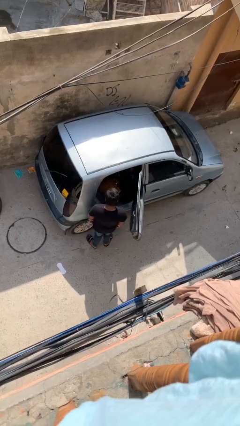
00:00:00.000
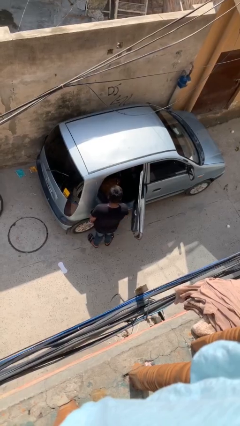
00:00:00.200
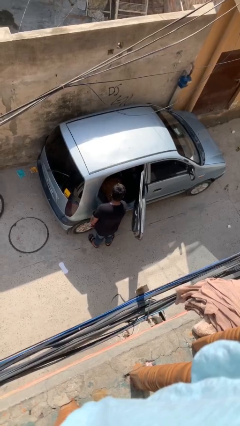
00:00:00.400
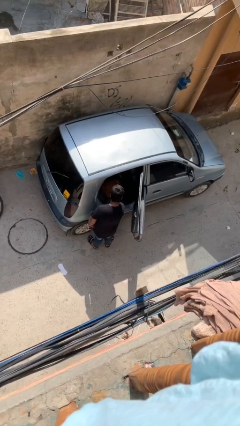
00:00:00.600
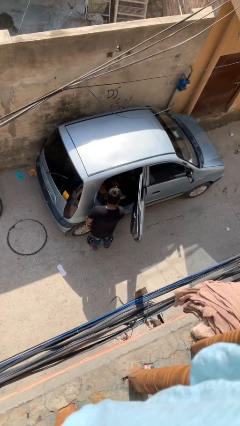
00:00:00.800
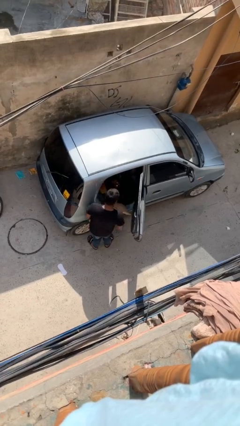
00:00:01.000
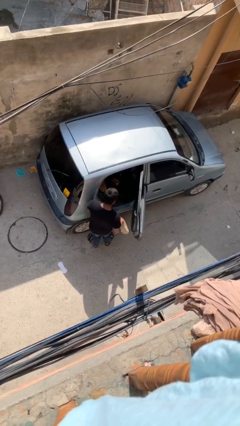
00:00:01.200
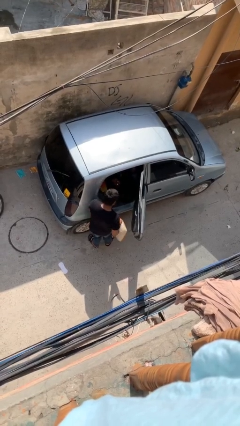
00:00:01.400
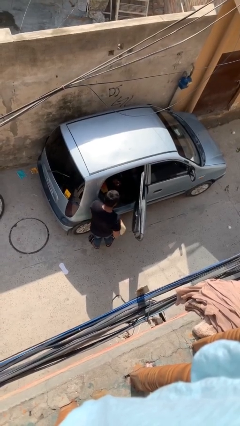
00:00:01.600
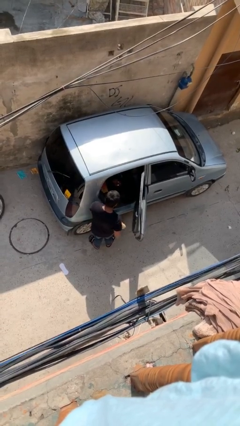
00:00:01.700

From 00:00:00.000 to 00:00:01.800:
person unloads car

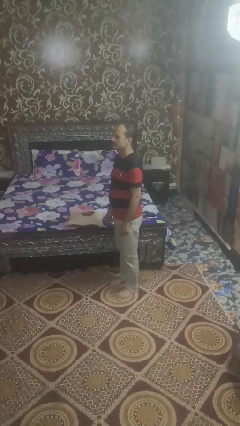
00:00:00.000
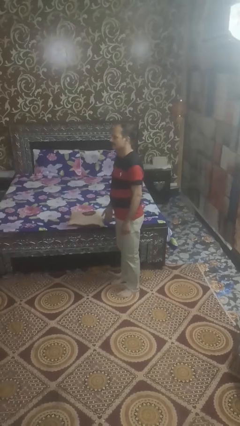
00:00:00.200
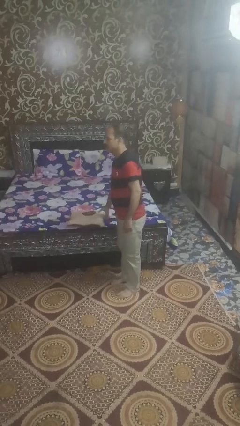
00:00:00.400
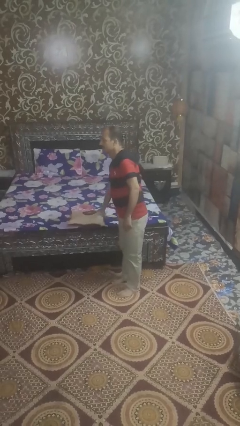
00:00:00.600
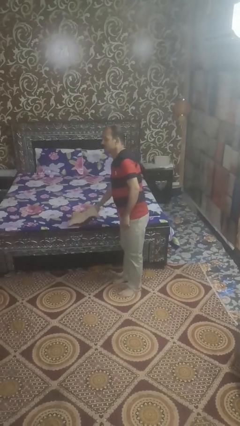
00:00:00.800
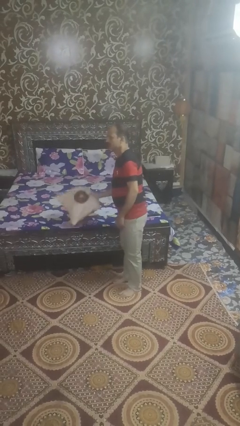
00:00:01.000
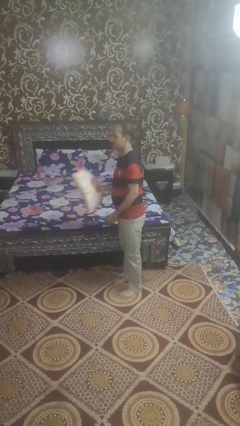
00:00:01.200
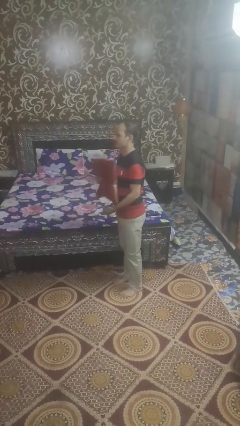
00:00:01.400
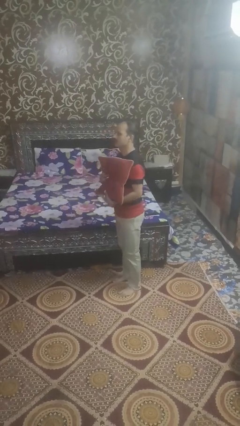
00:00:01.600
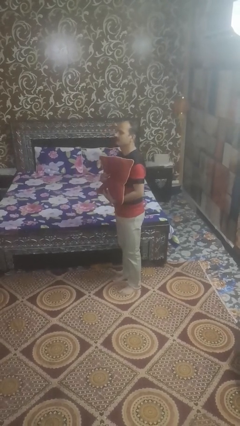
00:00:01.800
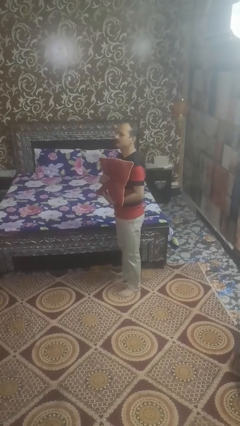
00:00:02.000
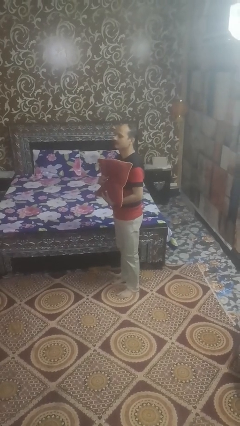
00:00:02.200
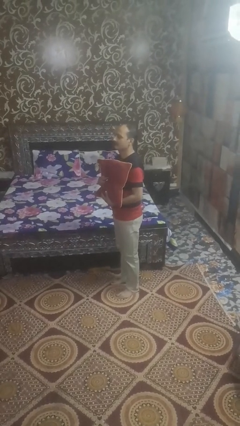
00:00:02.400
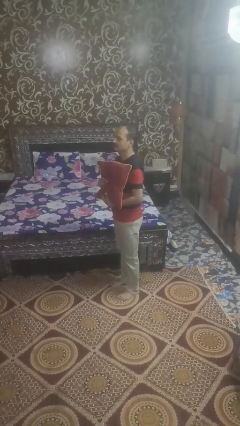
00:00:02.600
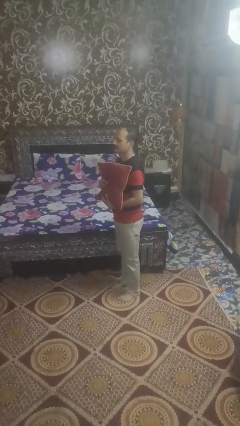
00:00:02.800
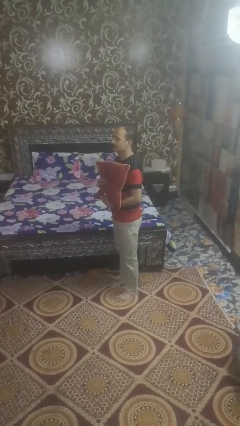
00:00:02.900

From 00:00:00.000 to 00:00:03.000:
person picks up object from bed

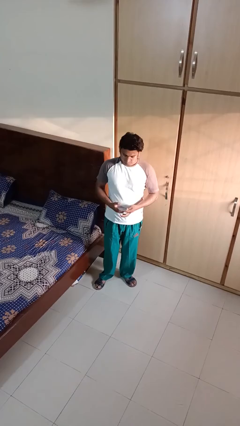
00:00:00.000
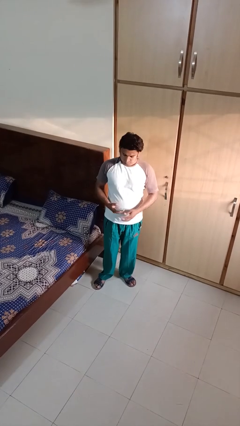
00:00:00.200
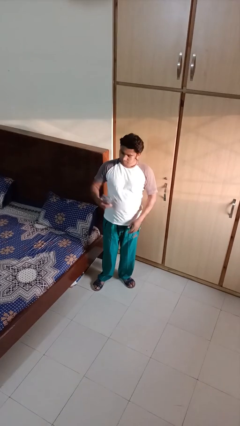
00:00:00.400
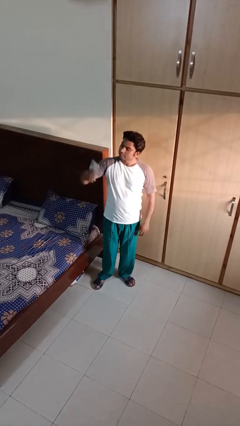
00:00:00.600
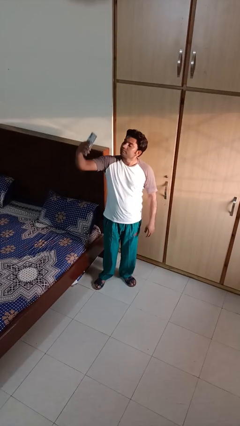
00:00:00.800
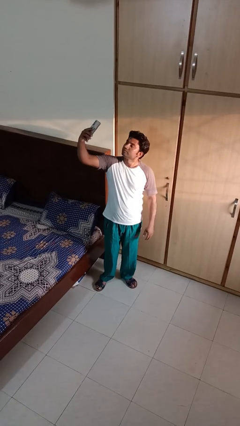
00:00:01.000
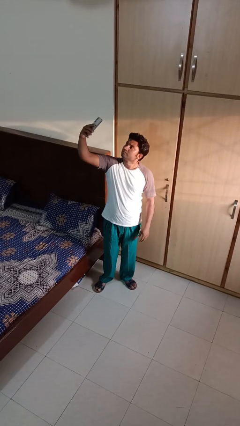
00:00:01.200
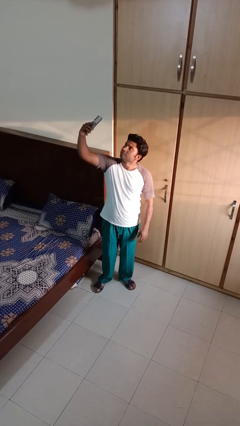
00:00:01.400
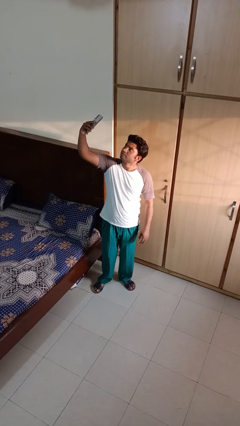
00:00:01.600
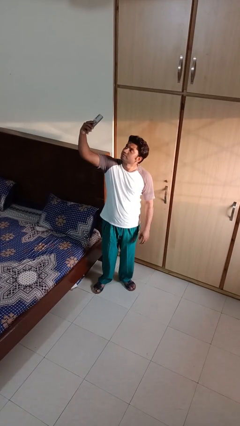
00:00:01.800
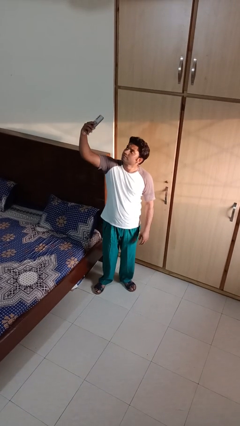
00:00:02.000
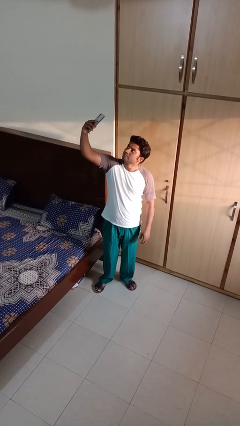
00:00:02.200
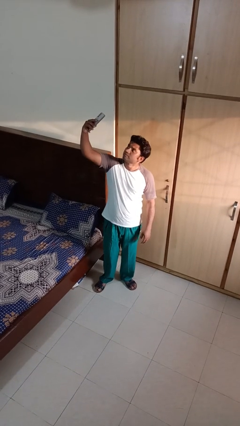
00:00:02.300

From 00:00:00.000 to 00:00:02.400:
person takes selfie

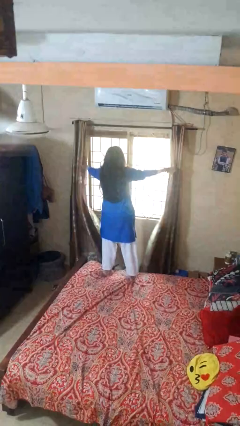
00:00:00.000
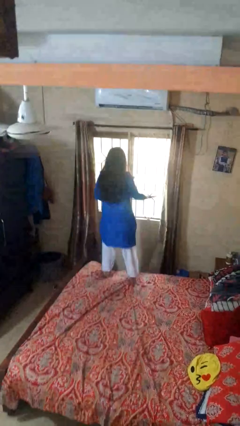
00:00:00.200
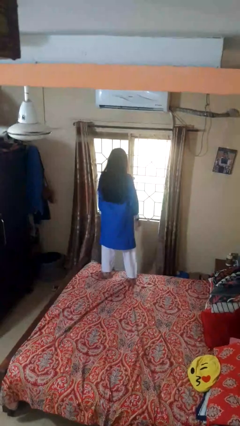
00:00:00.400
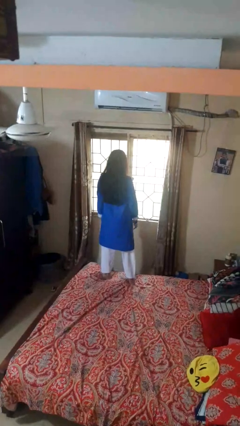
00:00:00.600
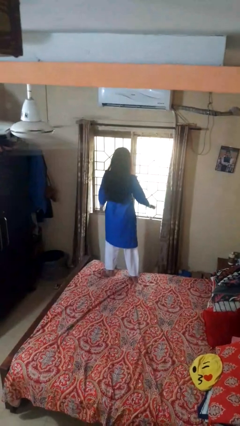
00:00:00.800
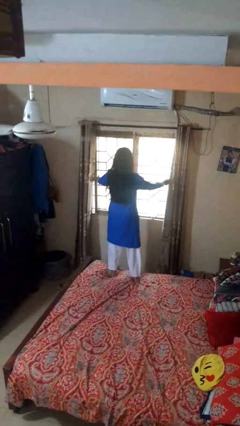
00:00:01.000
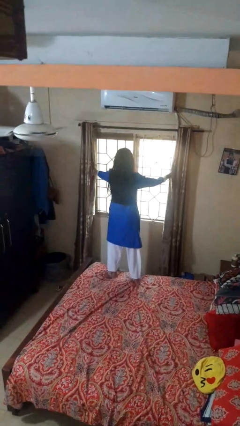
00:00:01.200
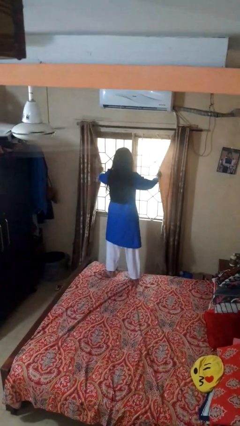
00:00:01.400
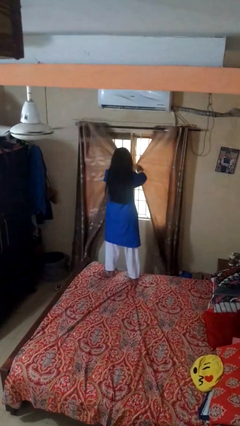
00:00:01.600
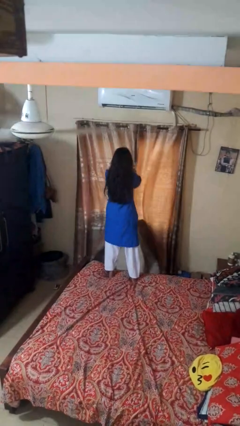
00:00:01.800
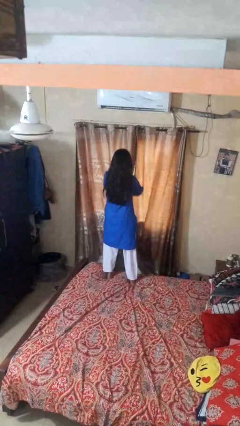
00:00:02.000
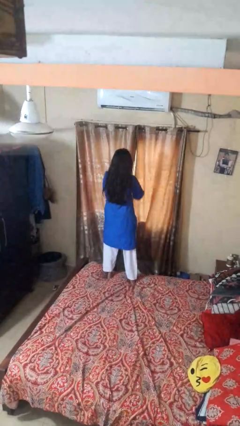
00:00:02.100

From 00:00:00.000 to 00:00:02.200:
person closes curtains

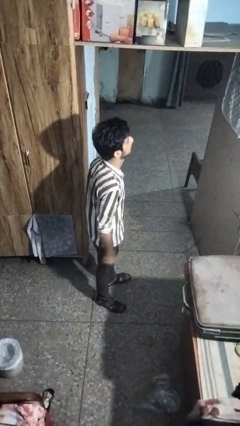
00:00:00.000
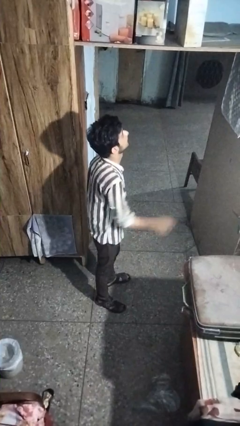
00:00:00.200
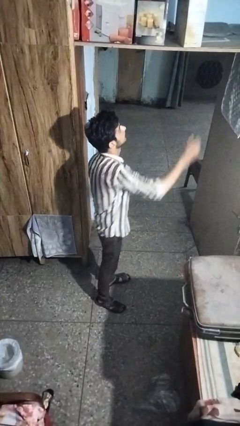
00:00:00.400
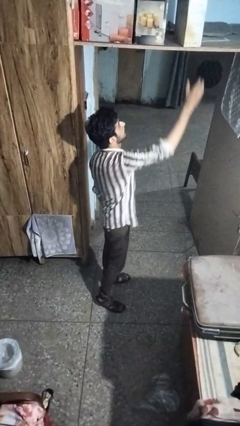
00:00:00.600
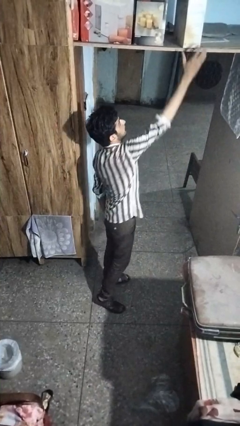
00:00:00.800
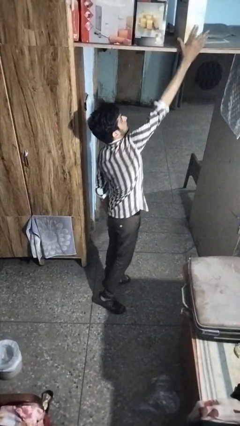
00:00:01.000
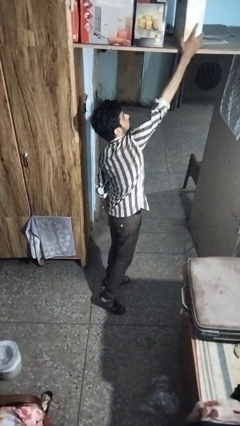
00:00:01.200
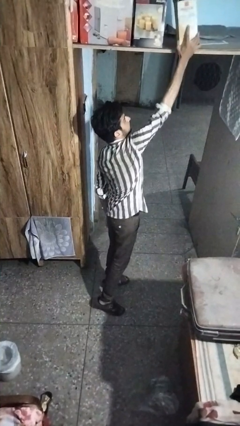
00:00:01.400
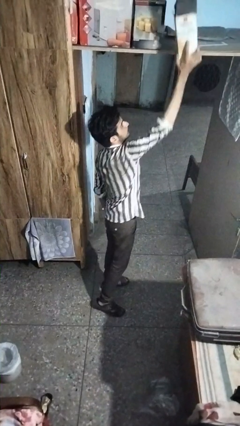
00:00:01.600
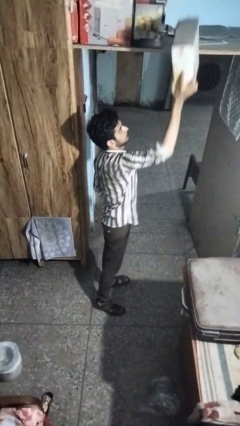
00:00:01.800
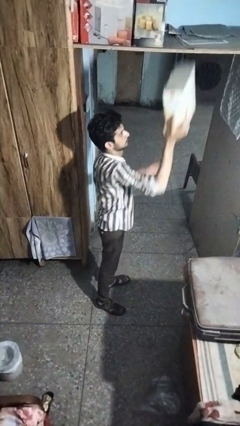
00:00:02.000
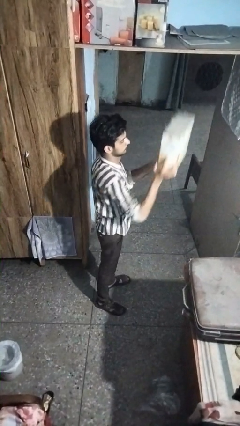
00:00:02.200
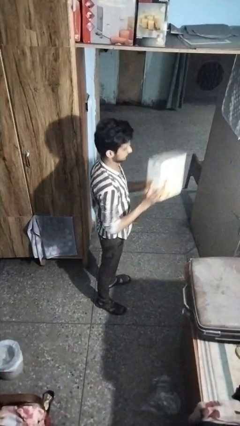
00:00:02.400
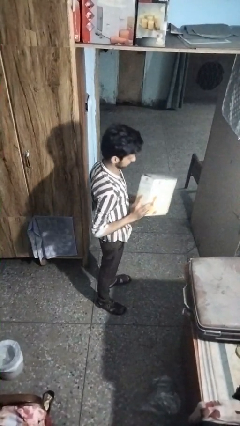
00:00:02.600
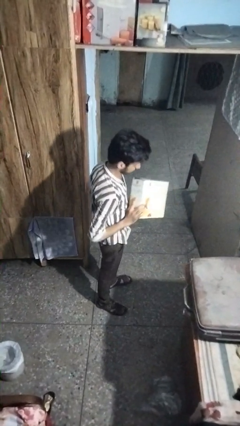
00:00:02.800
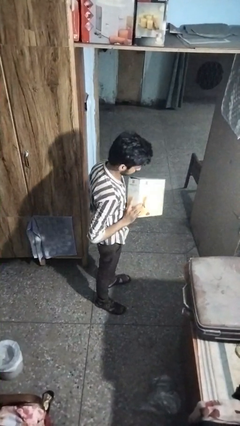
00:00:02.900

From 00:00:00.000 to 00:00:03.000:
person picks up object from shelf

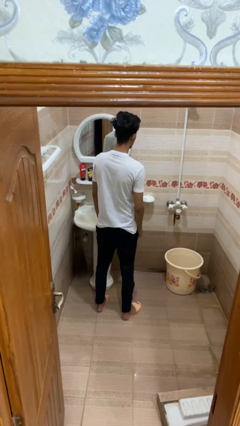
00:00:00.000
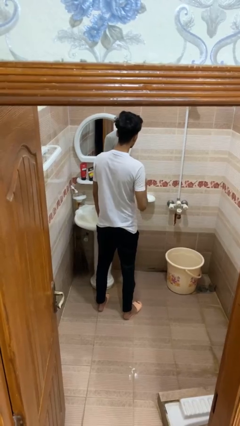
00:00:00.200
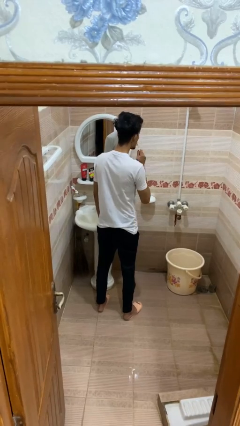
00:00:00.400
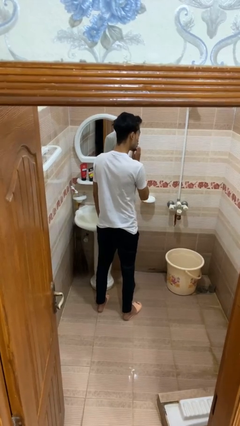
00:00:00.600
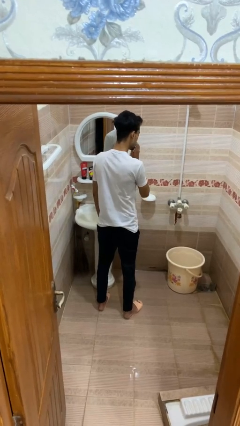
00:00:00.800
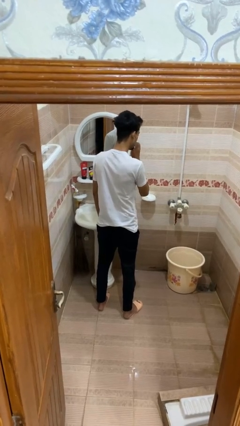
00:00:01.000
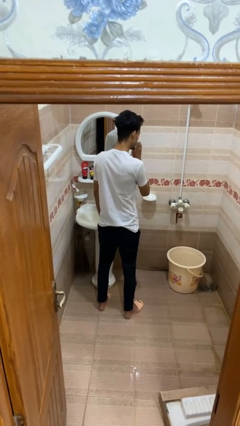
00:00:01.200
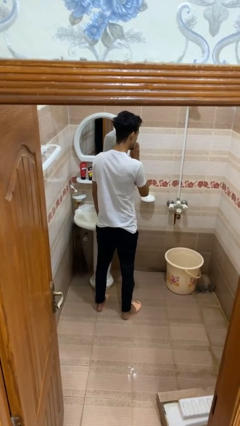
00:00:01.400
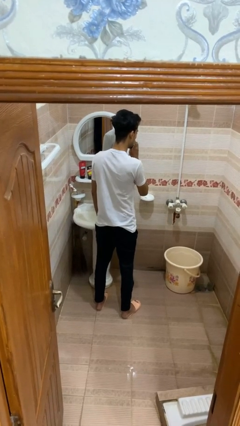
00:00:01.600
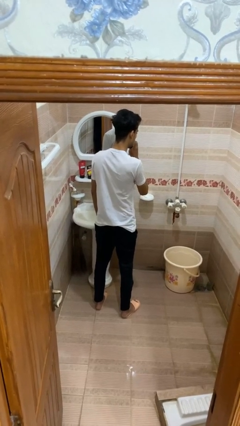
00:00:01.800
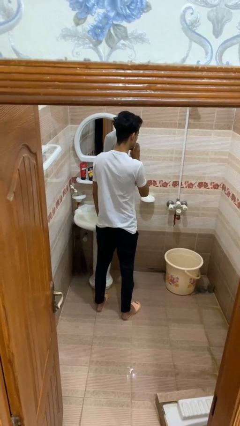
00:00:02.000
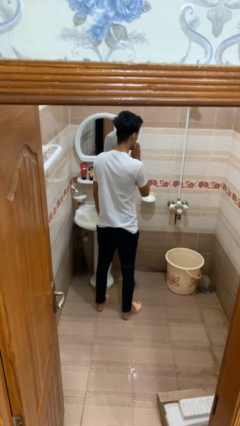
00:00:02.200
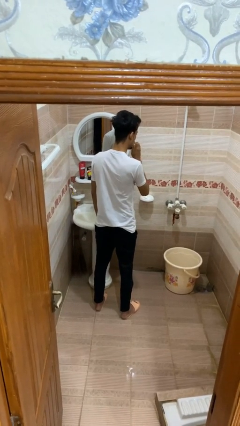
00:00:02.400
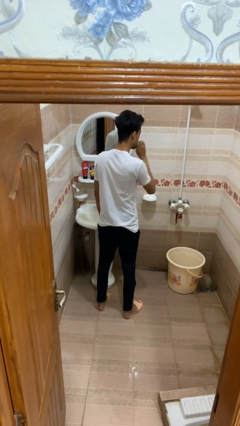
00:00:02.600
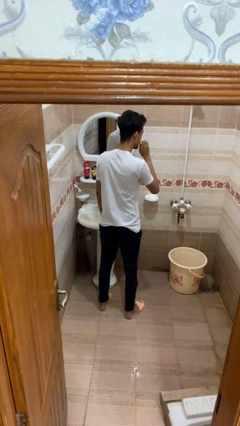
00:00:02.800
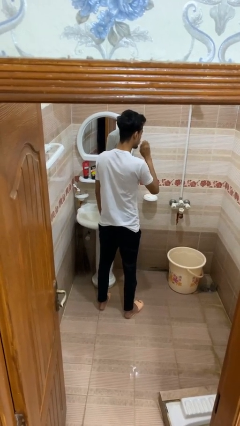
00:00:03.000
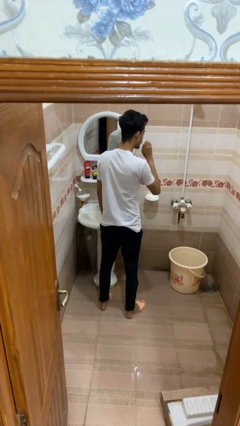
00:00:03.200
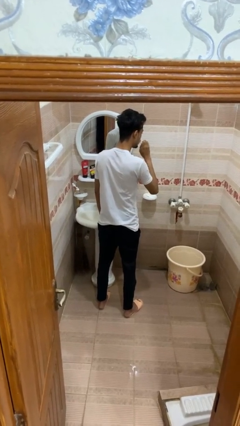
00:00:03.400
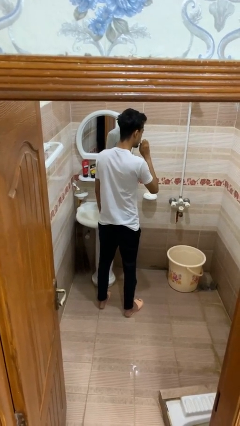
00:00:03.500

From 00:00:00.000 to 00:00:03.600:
person brushes teeth

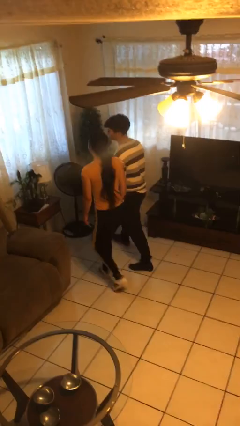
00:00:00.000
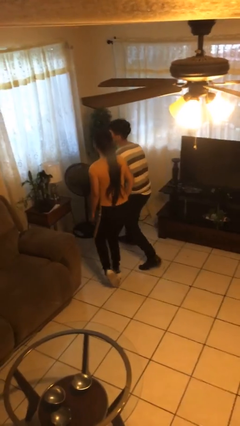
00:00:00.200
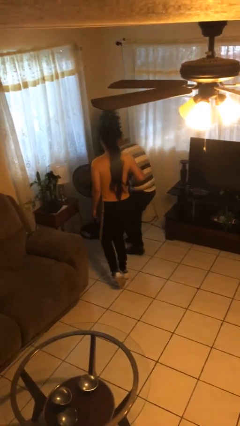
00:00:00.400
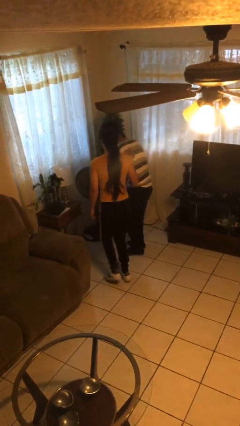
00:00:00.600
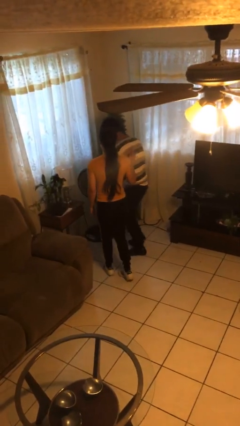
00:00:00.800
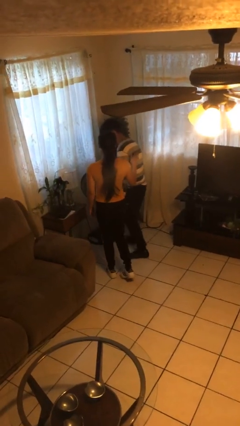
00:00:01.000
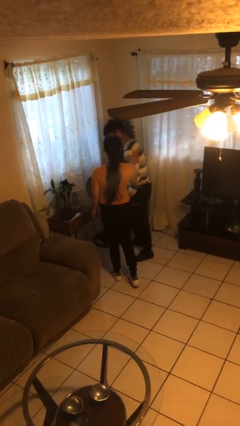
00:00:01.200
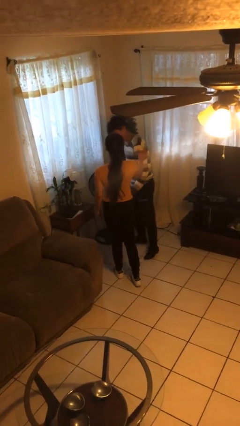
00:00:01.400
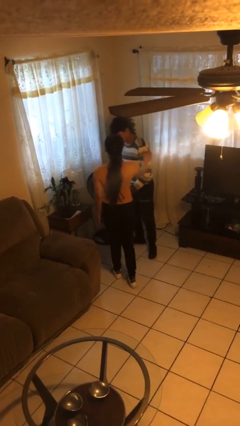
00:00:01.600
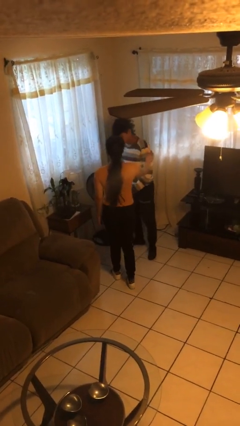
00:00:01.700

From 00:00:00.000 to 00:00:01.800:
person bumps into person
